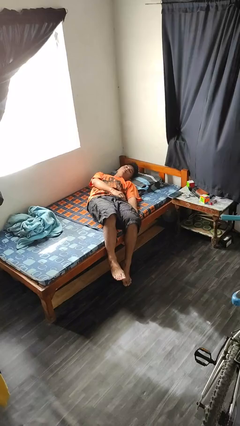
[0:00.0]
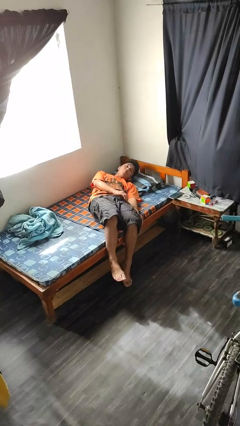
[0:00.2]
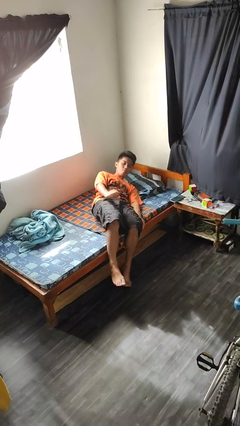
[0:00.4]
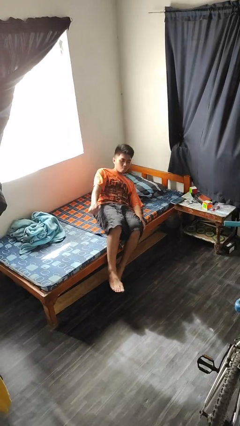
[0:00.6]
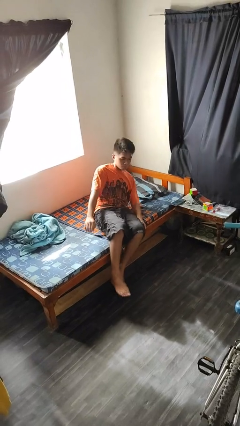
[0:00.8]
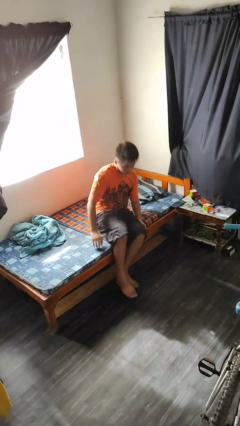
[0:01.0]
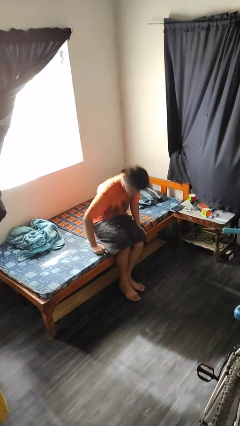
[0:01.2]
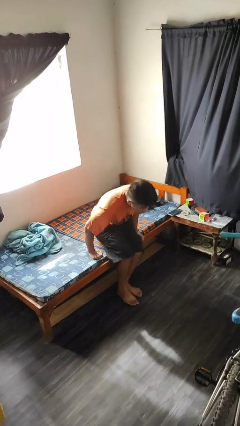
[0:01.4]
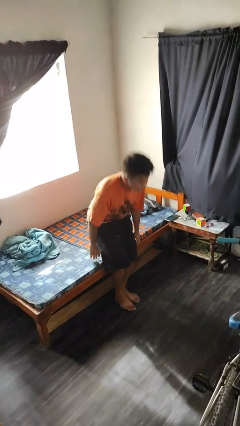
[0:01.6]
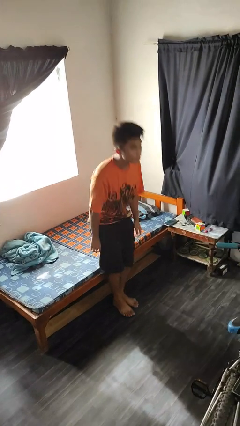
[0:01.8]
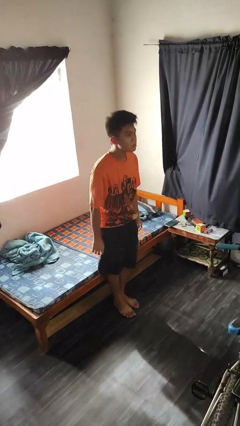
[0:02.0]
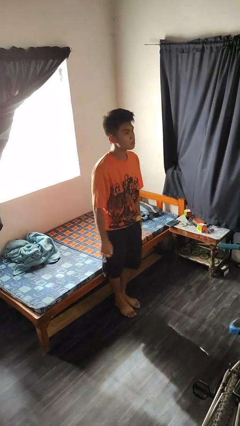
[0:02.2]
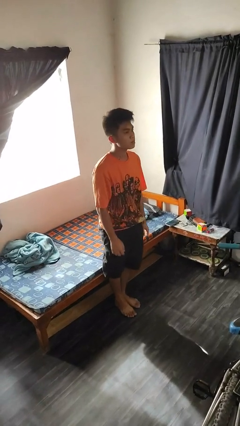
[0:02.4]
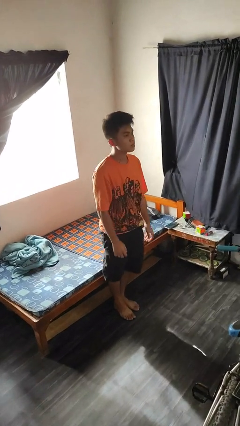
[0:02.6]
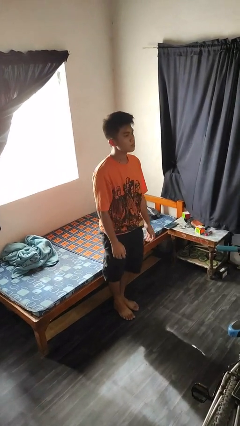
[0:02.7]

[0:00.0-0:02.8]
person stands up

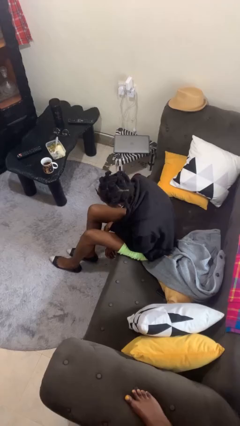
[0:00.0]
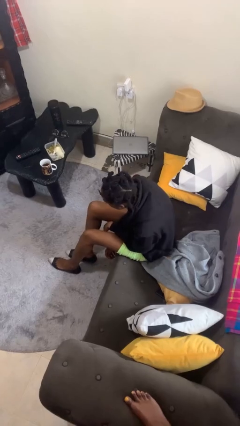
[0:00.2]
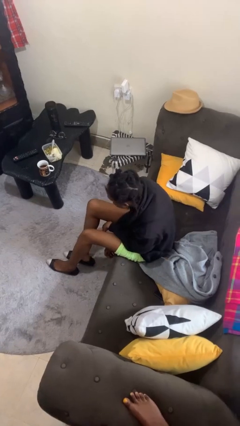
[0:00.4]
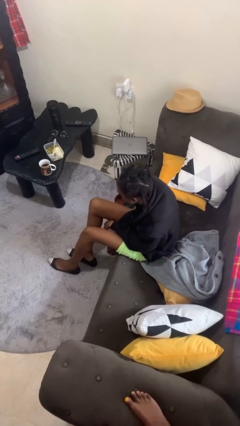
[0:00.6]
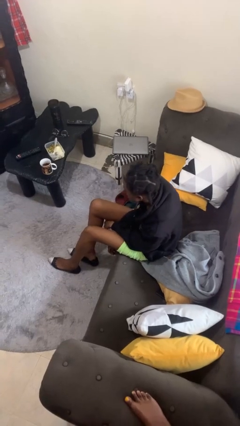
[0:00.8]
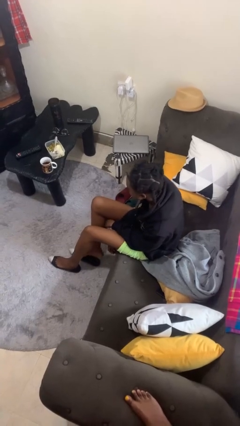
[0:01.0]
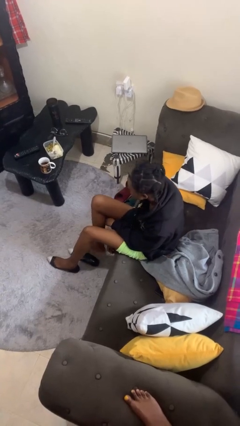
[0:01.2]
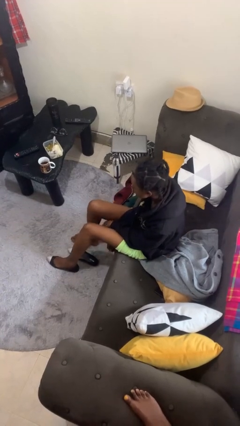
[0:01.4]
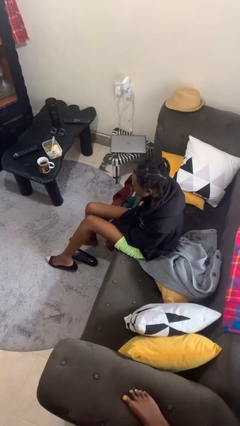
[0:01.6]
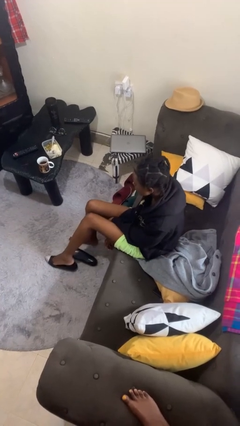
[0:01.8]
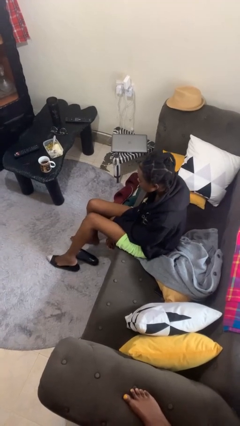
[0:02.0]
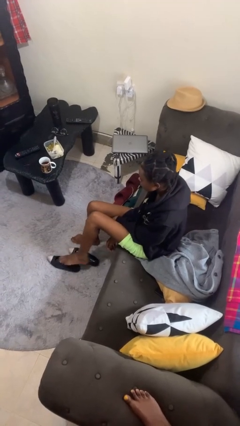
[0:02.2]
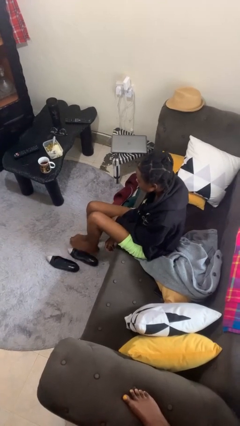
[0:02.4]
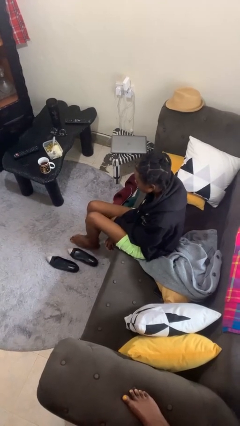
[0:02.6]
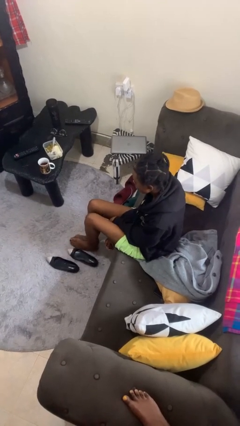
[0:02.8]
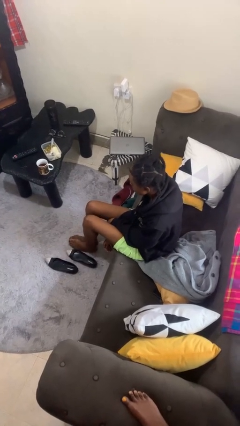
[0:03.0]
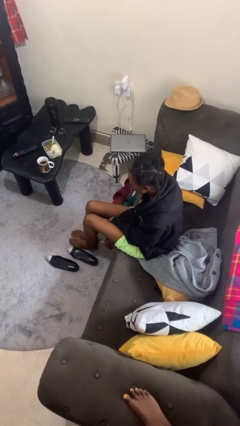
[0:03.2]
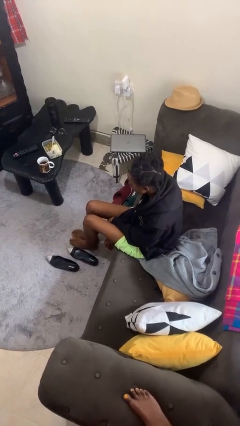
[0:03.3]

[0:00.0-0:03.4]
person takes off shoes

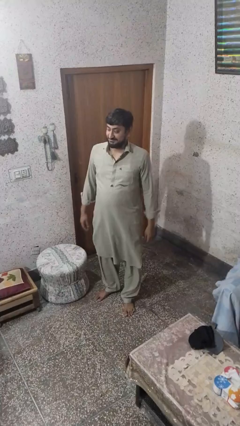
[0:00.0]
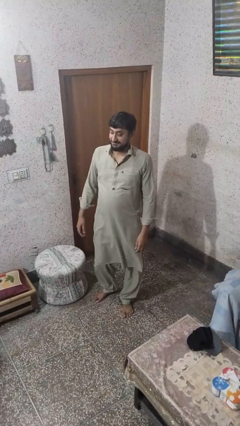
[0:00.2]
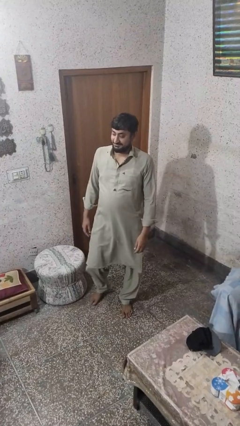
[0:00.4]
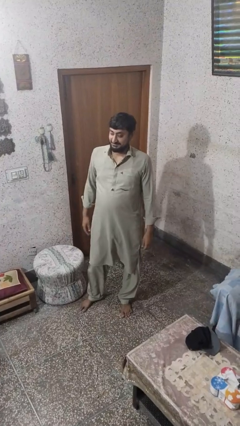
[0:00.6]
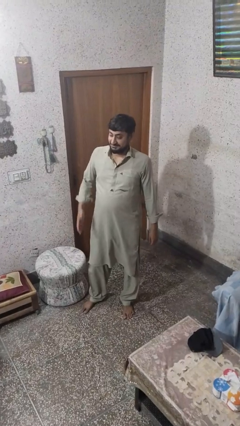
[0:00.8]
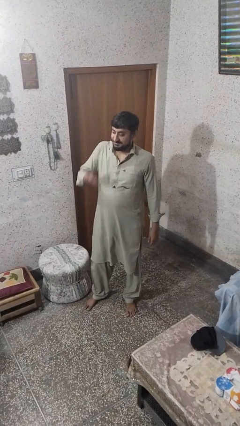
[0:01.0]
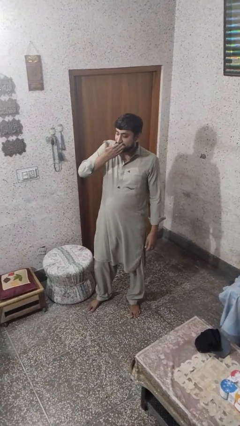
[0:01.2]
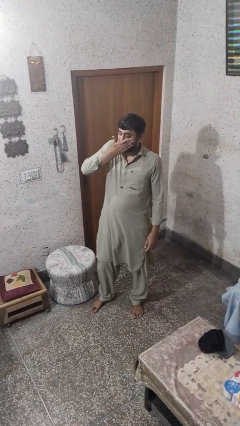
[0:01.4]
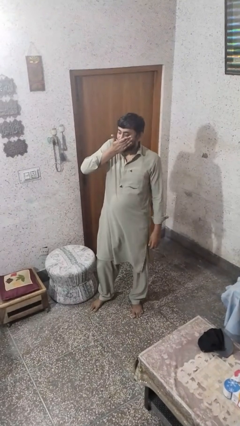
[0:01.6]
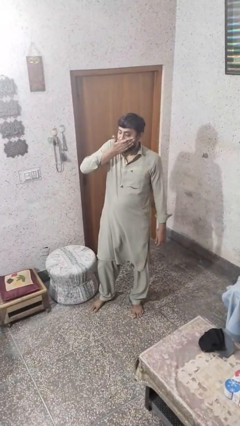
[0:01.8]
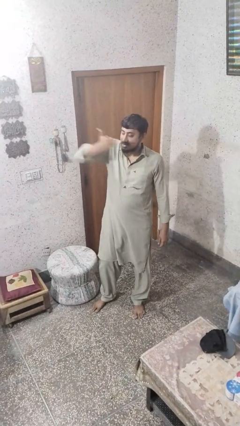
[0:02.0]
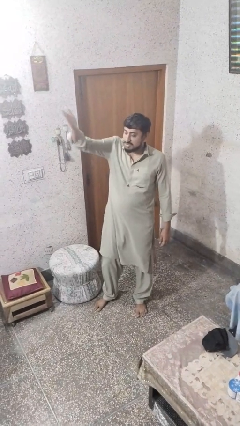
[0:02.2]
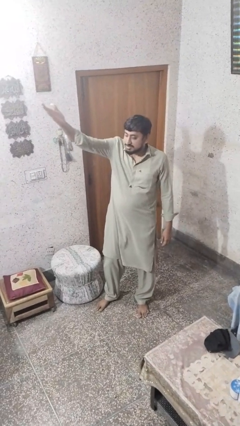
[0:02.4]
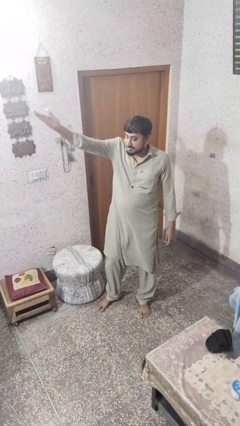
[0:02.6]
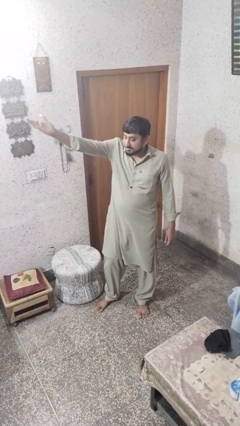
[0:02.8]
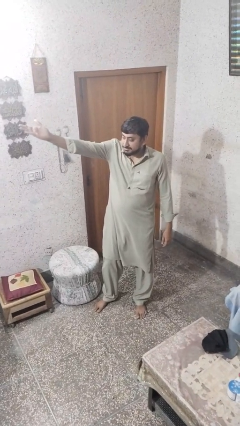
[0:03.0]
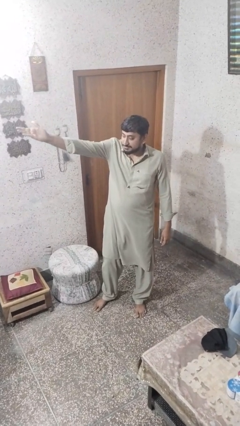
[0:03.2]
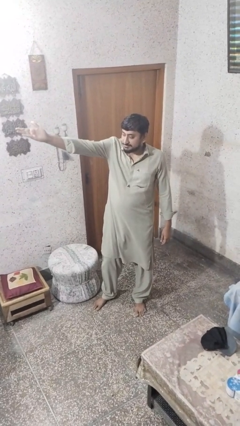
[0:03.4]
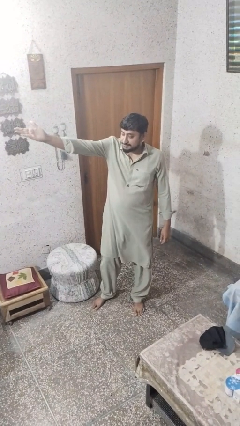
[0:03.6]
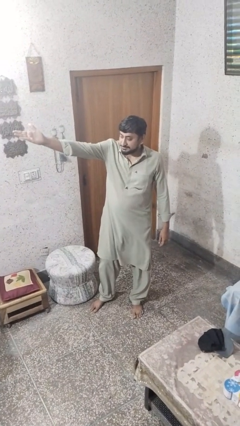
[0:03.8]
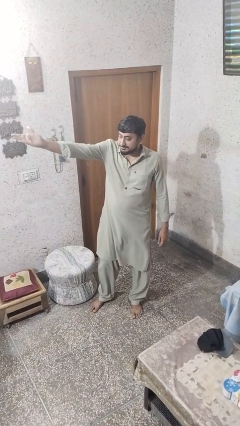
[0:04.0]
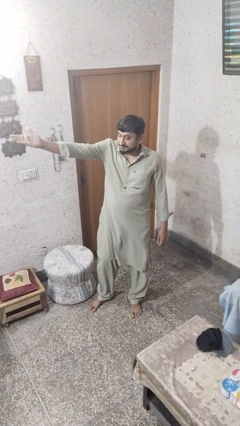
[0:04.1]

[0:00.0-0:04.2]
person gestures blow kiss

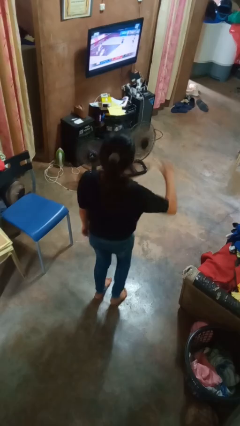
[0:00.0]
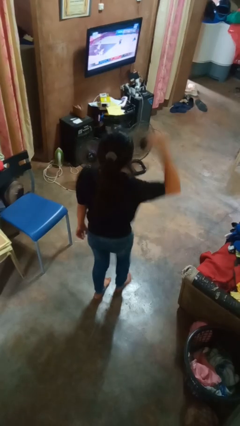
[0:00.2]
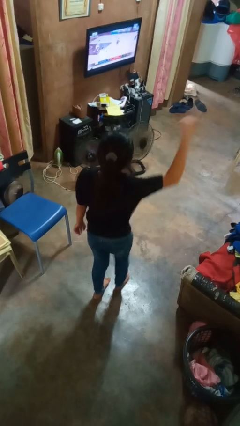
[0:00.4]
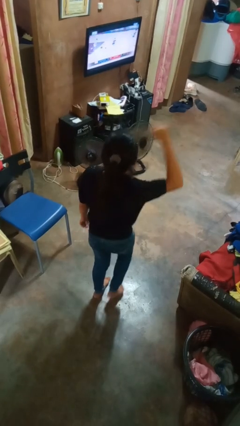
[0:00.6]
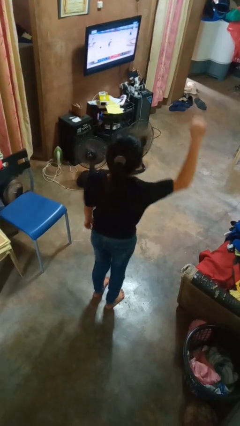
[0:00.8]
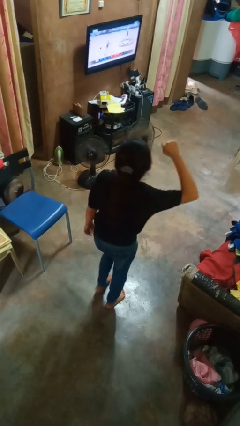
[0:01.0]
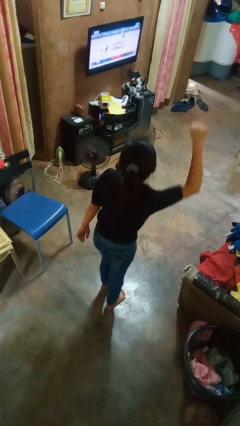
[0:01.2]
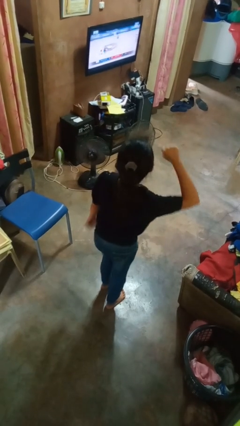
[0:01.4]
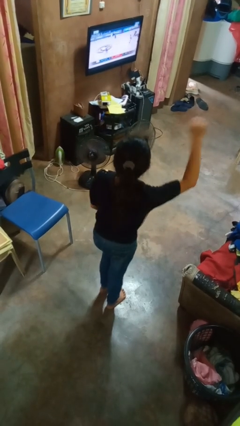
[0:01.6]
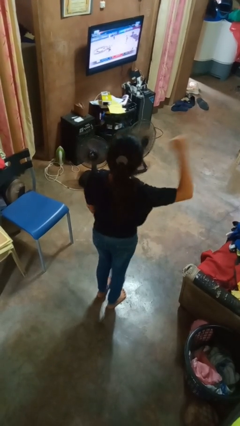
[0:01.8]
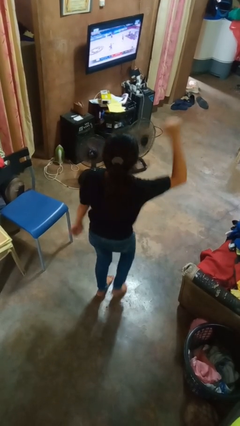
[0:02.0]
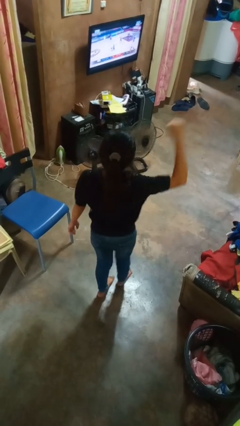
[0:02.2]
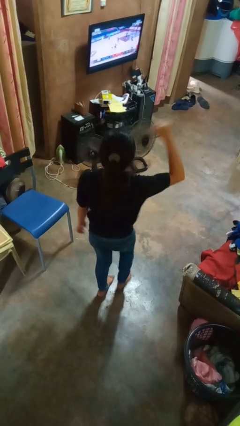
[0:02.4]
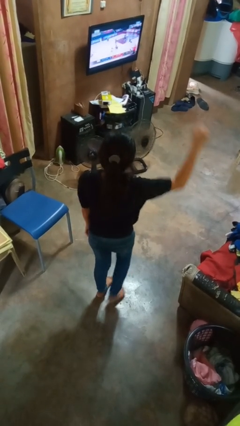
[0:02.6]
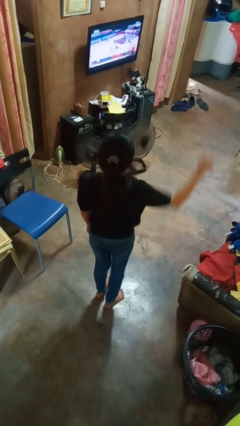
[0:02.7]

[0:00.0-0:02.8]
person dances in place

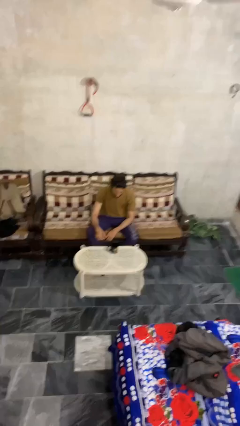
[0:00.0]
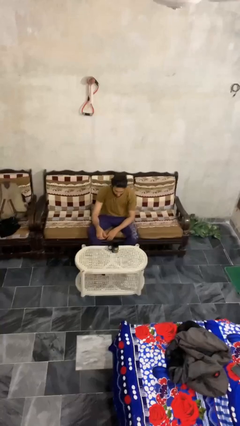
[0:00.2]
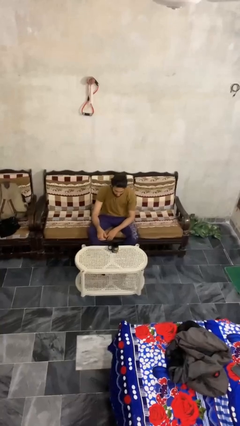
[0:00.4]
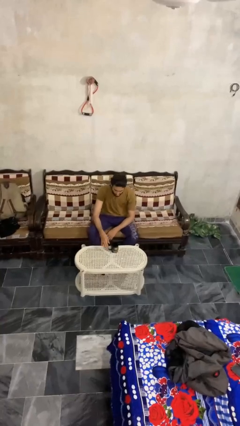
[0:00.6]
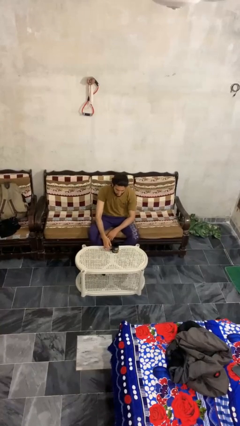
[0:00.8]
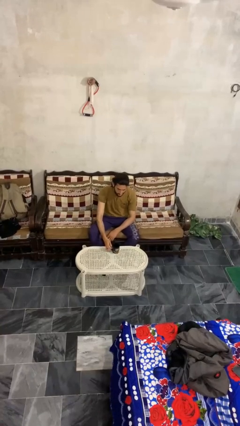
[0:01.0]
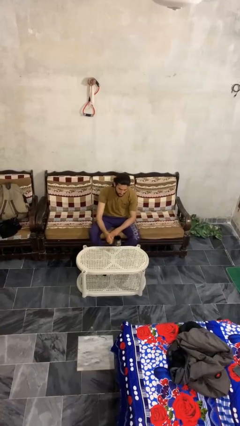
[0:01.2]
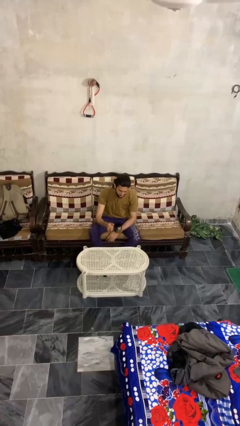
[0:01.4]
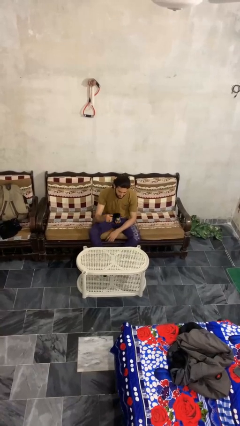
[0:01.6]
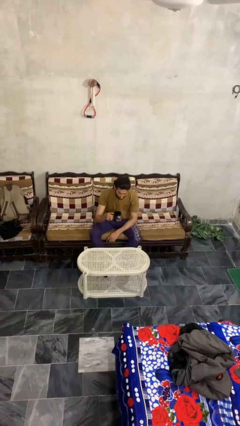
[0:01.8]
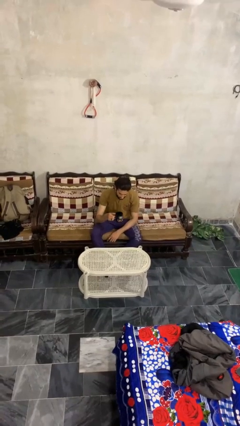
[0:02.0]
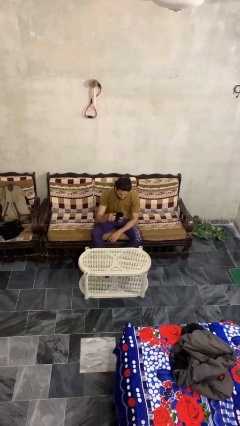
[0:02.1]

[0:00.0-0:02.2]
person picks up object from table

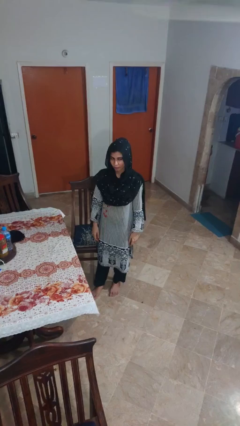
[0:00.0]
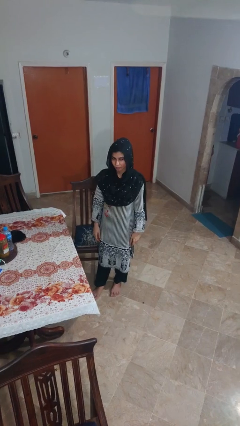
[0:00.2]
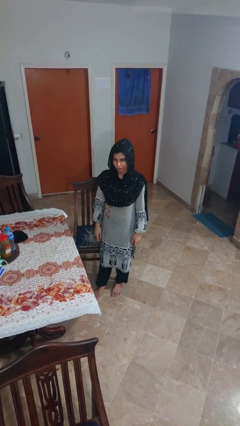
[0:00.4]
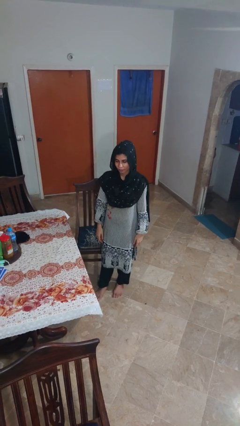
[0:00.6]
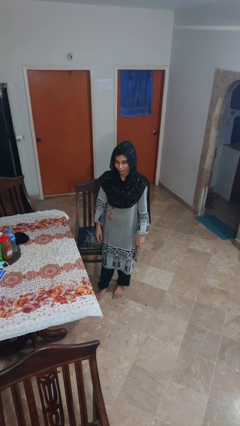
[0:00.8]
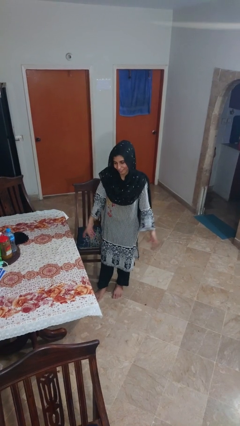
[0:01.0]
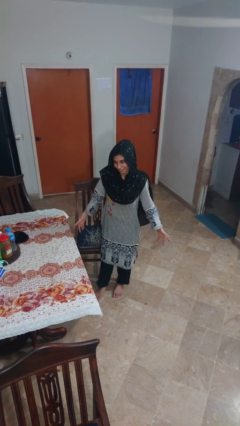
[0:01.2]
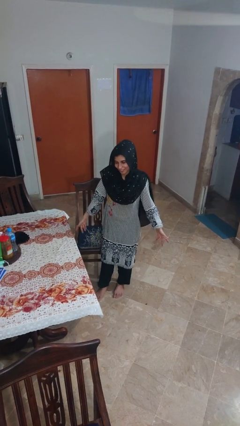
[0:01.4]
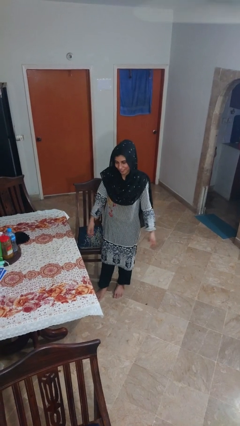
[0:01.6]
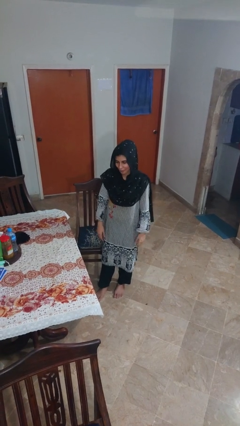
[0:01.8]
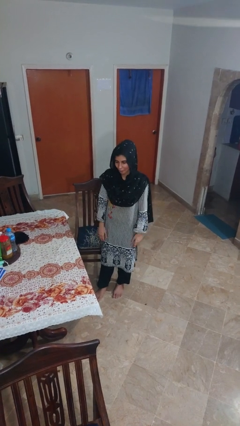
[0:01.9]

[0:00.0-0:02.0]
person shrugs
